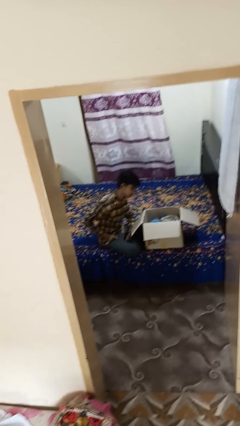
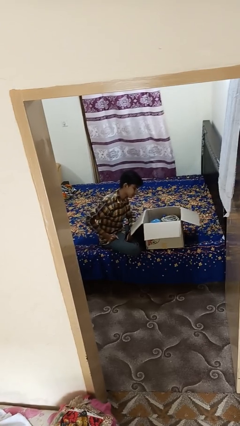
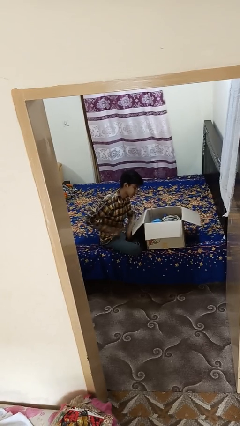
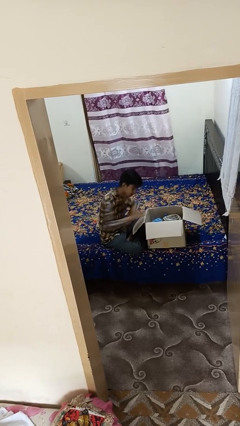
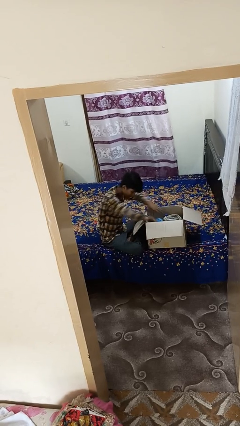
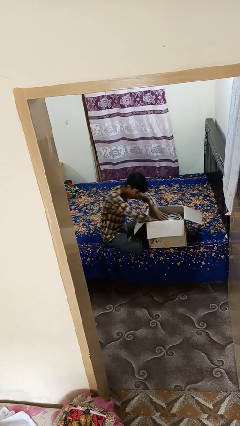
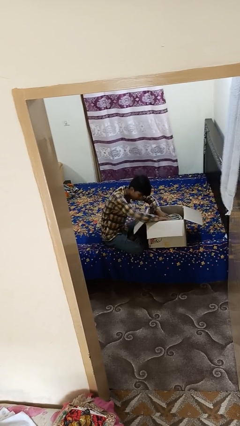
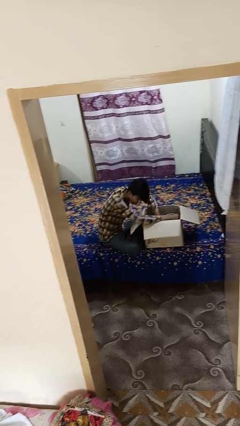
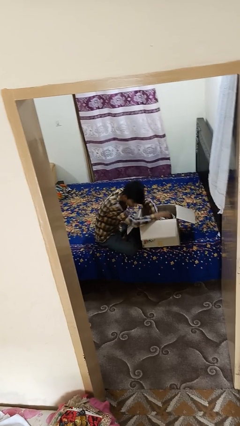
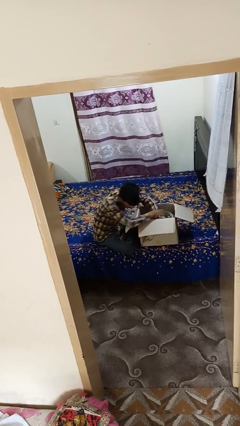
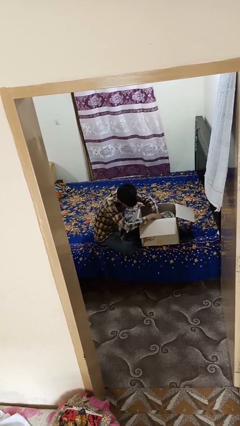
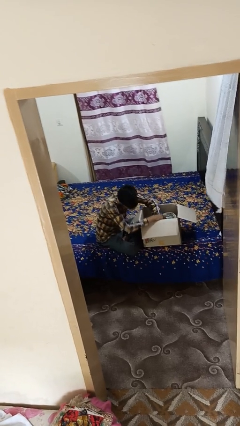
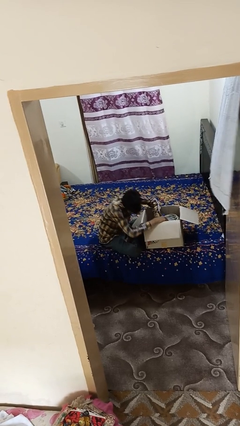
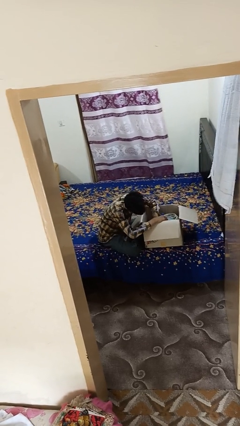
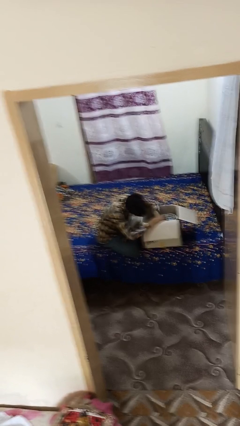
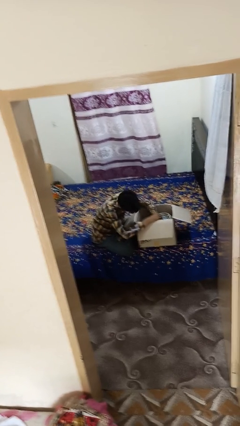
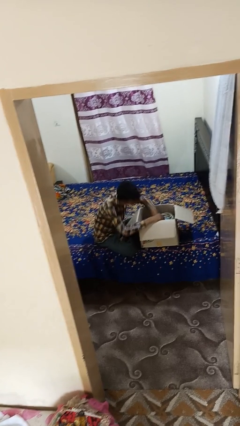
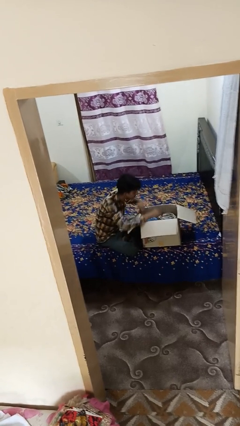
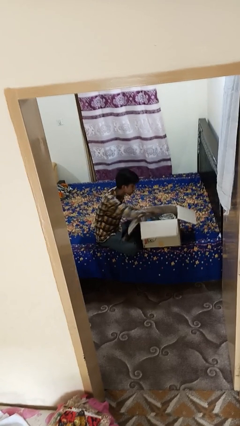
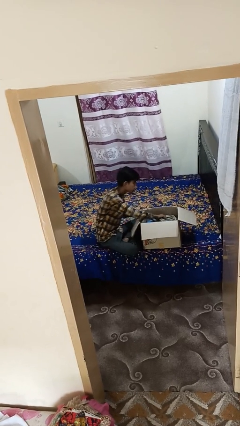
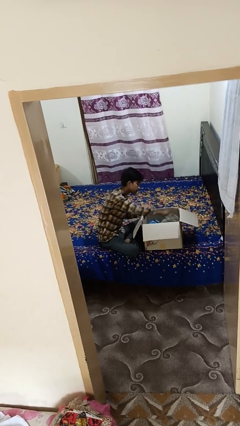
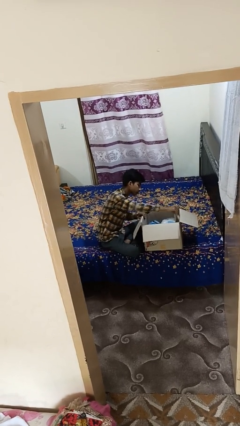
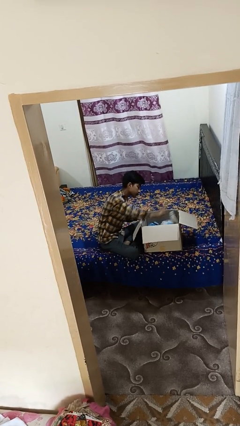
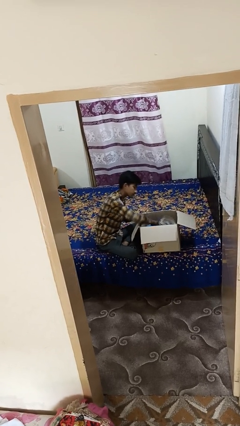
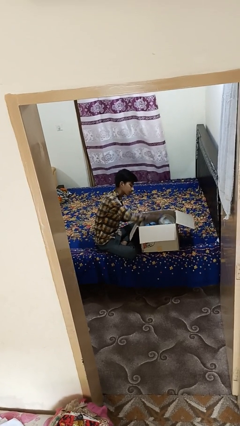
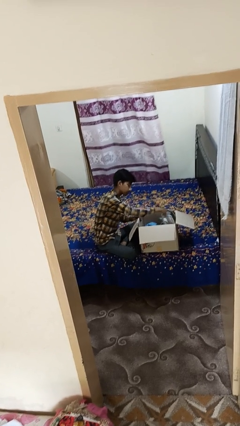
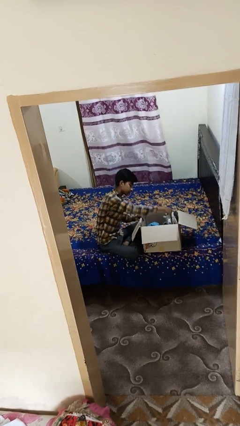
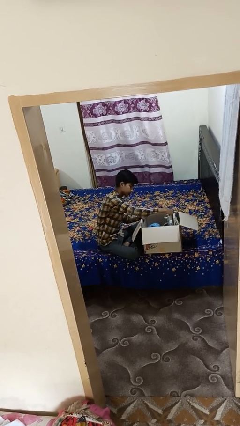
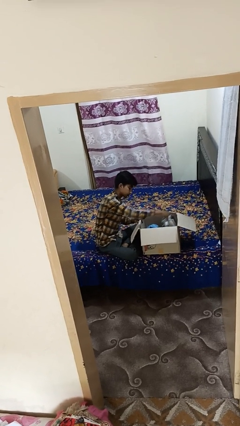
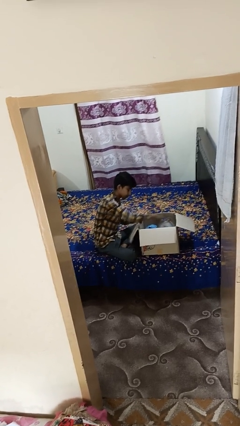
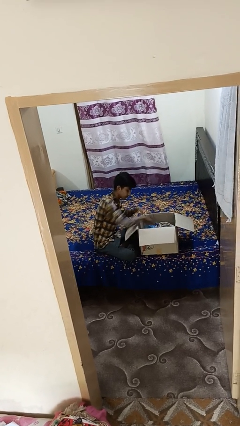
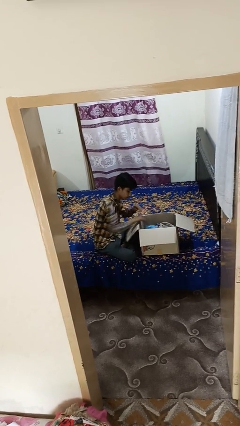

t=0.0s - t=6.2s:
person searches in box

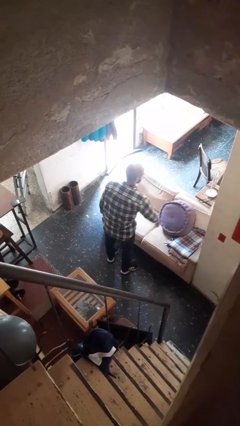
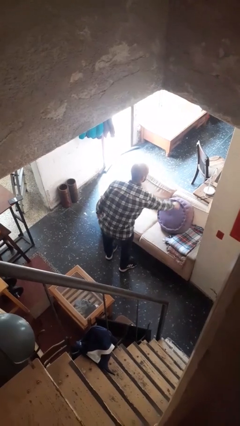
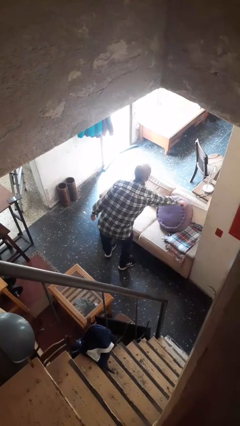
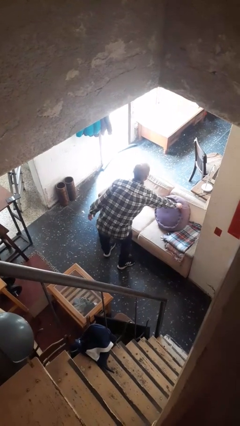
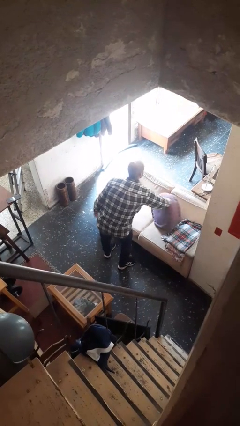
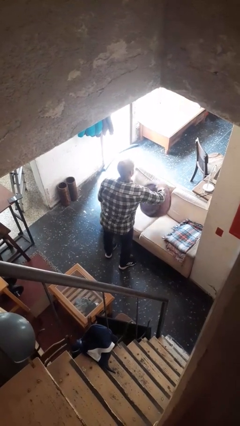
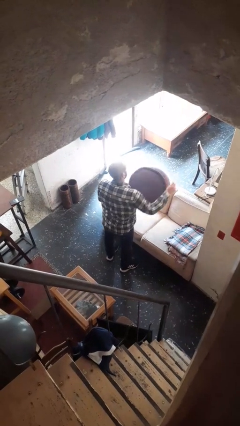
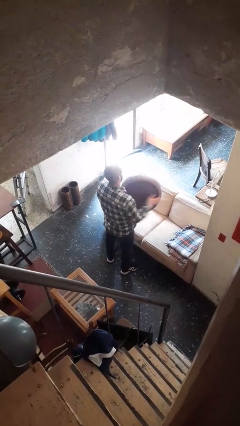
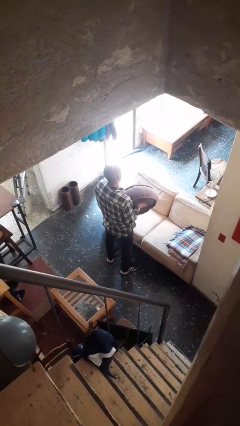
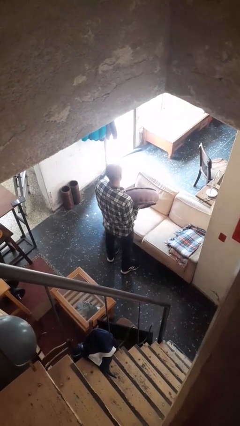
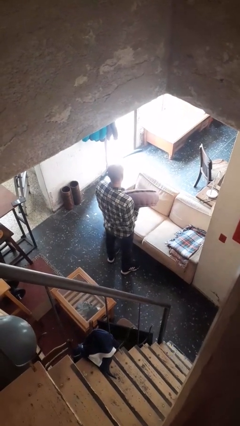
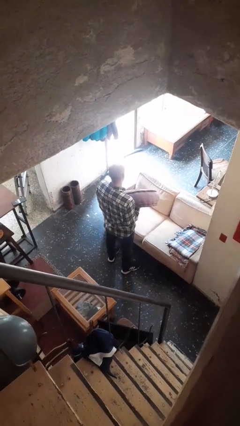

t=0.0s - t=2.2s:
person picks up object from couch

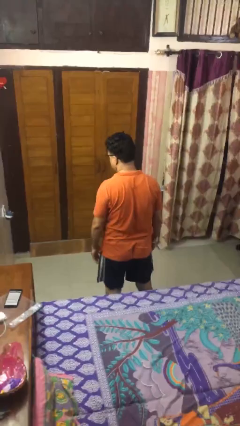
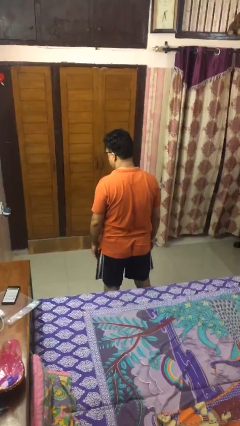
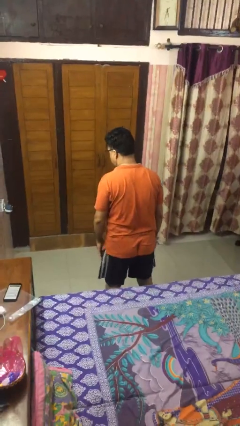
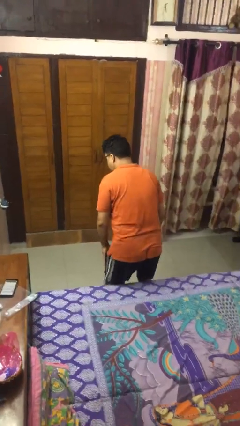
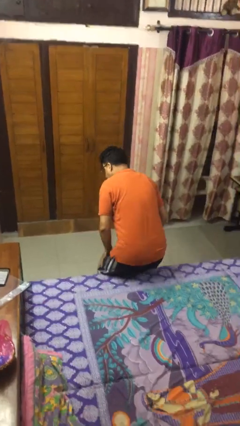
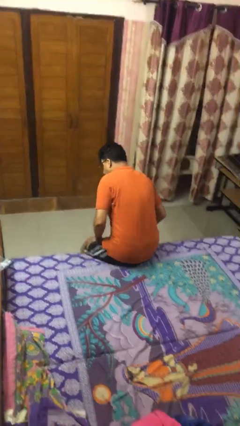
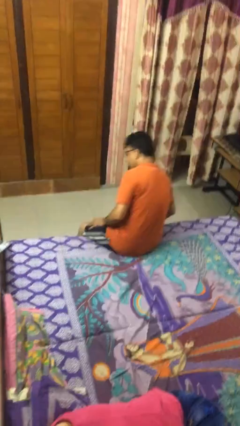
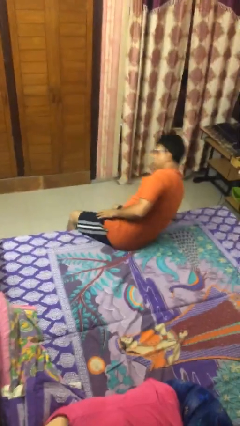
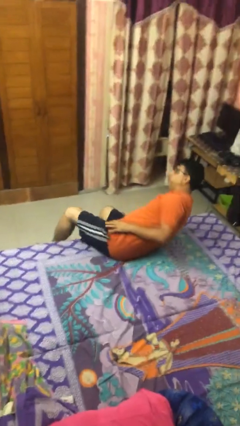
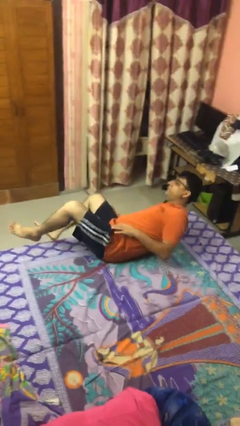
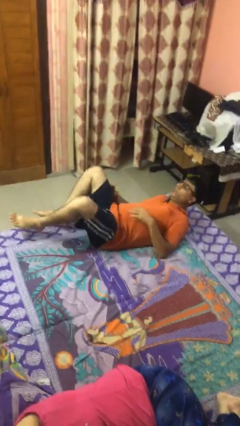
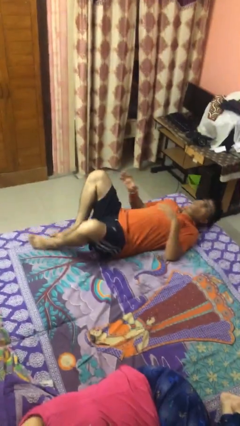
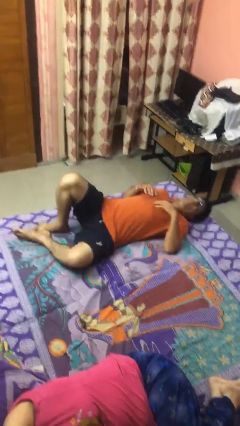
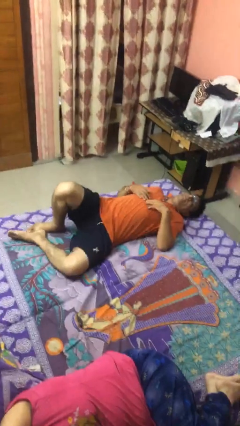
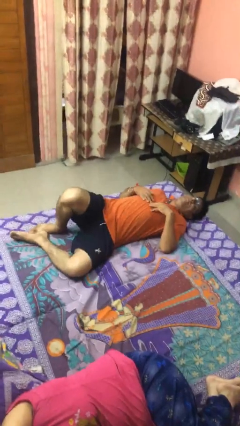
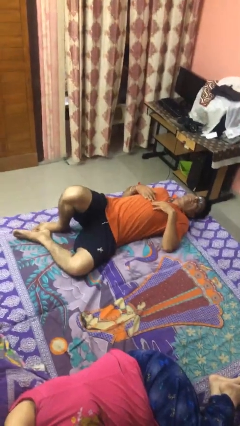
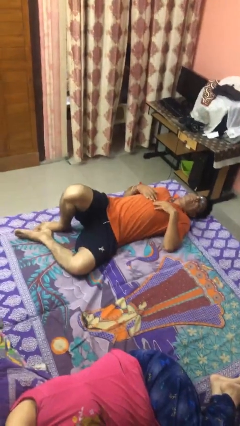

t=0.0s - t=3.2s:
person lies down on bed

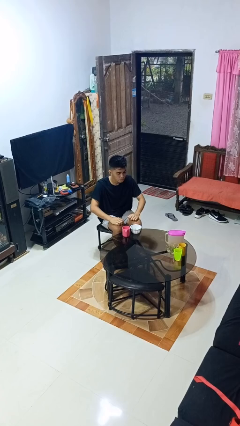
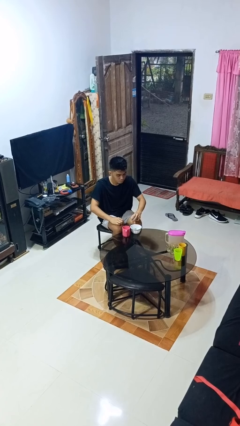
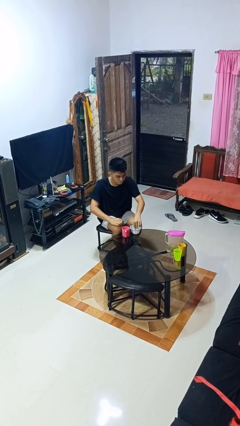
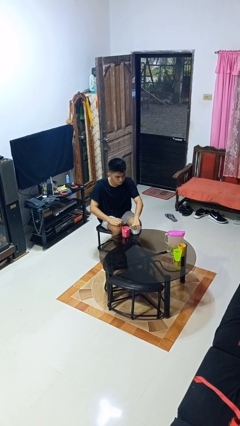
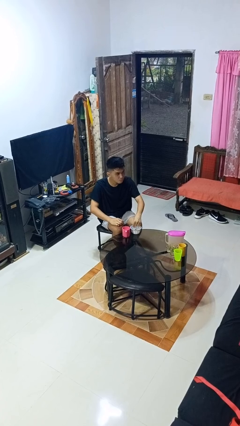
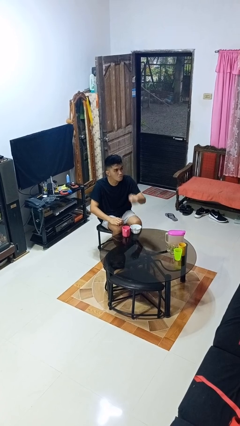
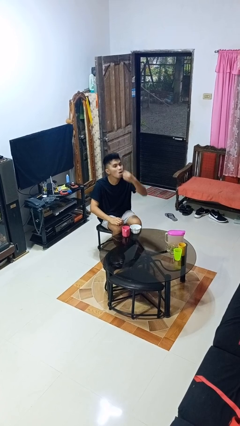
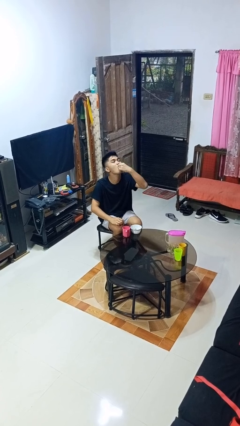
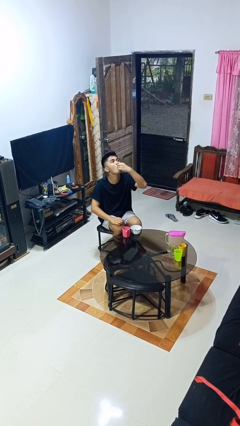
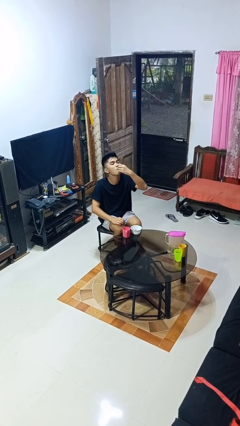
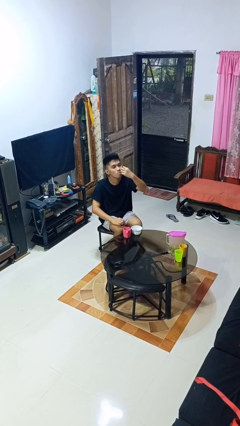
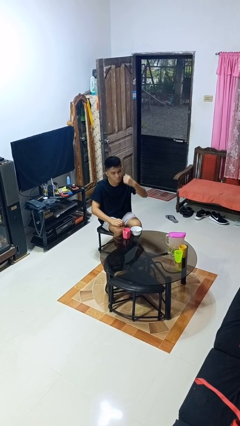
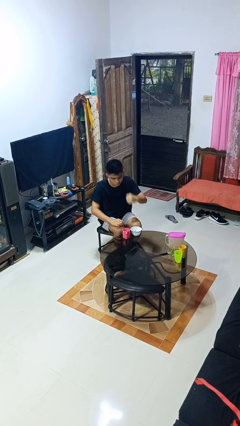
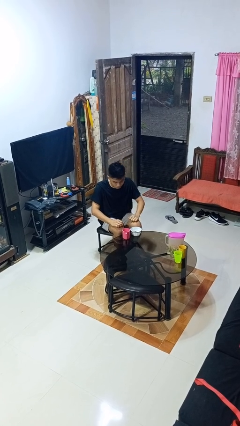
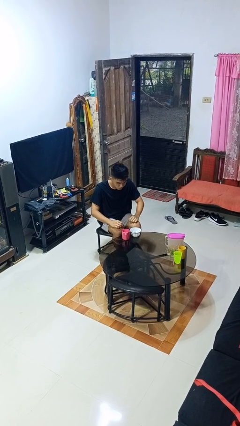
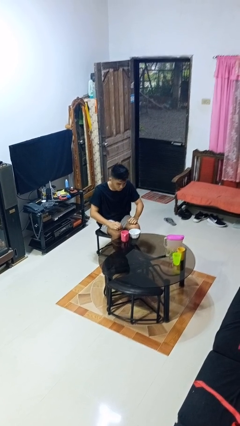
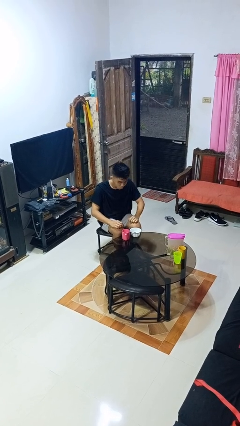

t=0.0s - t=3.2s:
person takes medicine pills

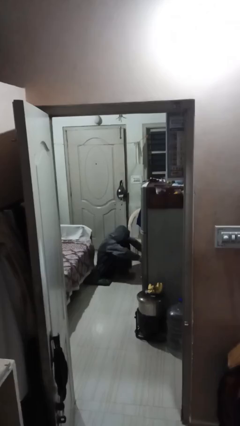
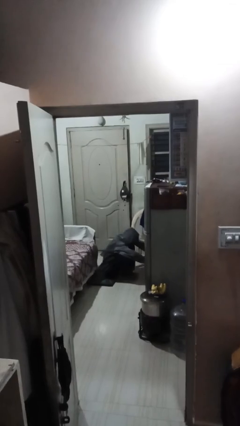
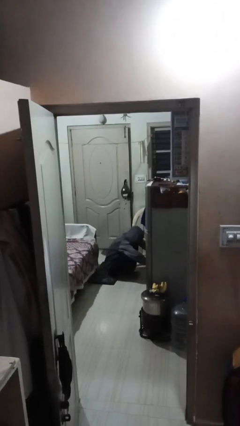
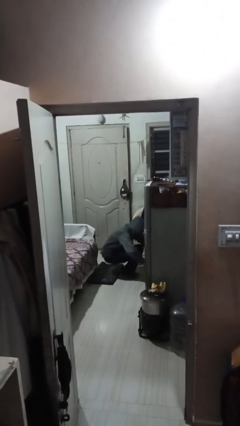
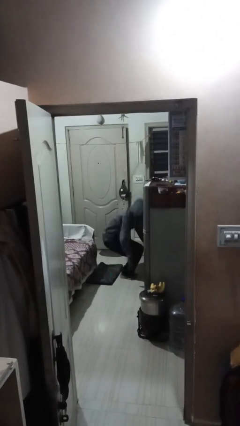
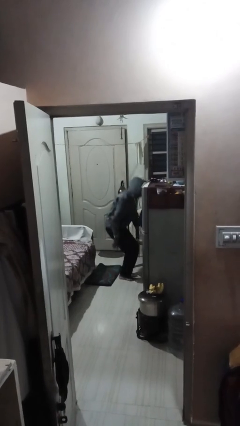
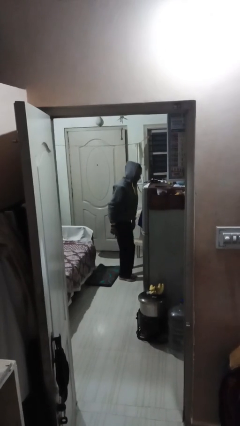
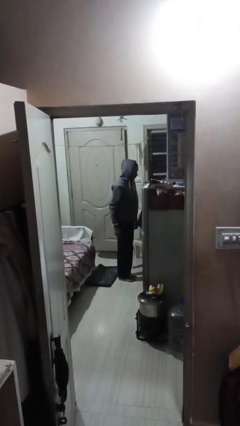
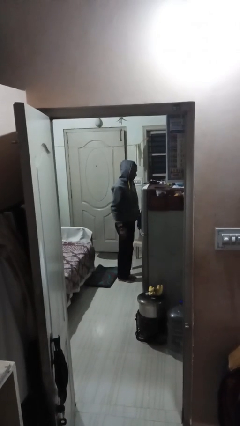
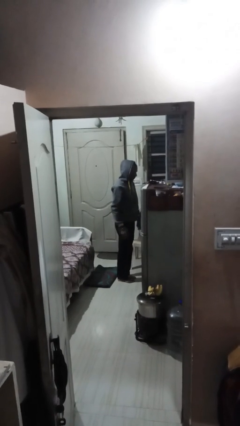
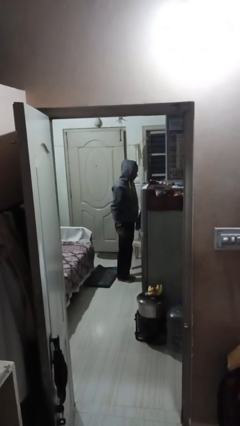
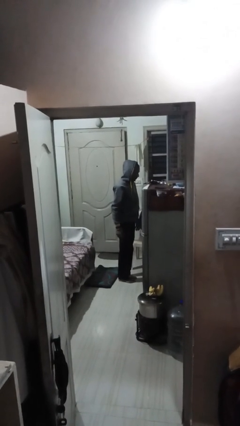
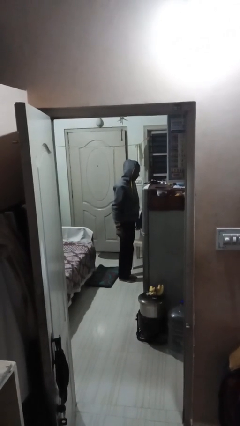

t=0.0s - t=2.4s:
person stands up

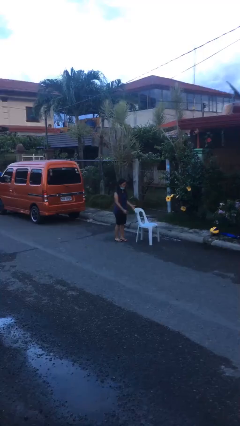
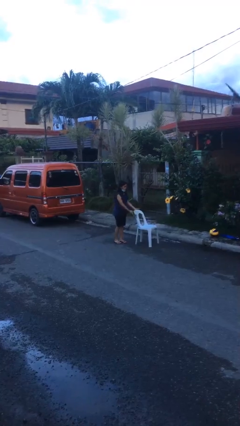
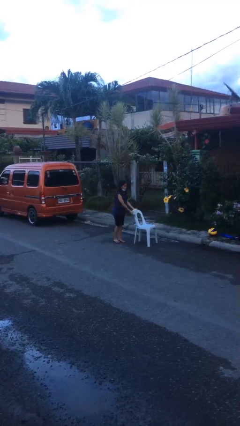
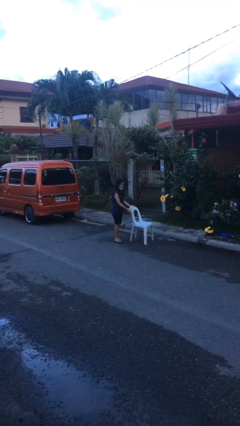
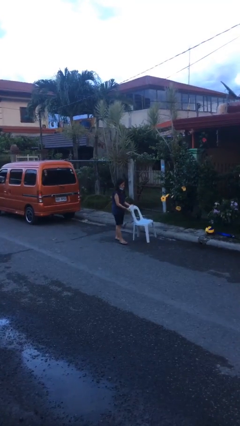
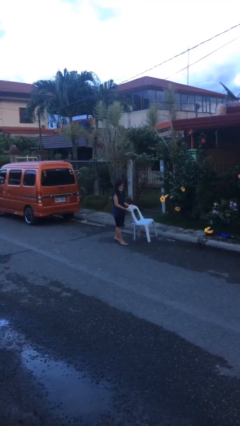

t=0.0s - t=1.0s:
person picks up object from floor
